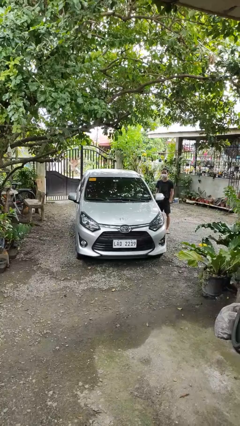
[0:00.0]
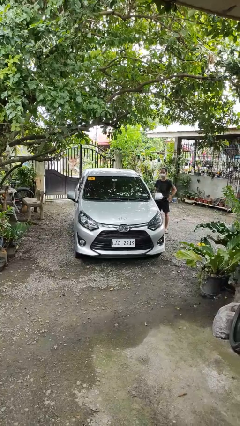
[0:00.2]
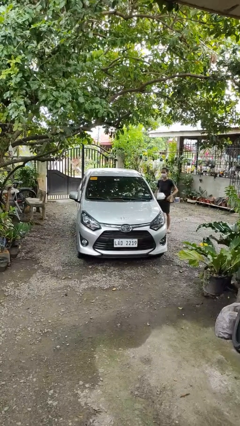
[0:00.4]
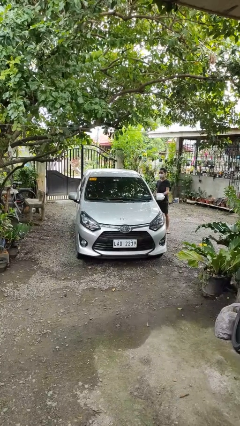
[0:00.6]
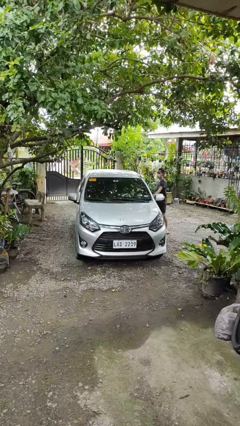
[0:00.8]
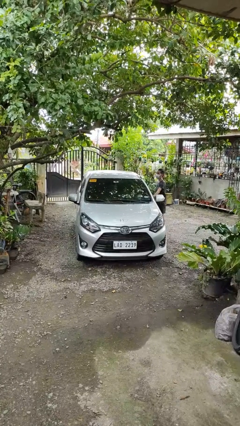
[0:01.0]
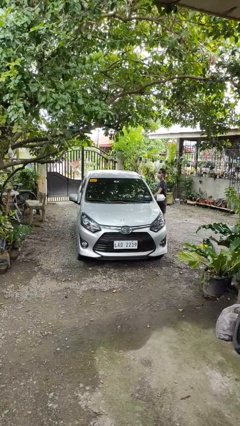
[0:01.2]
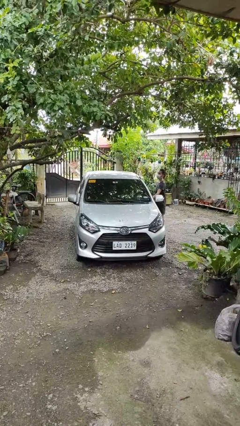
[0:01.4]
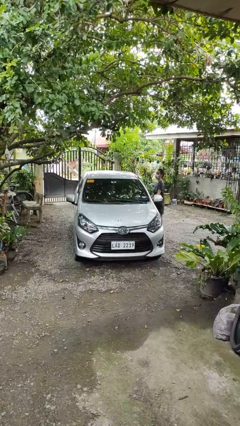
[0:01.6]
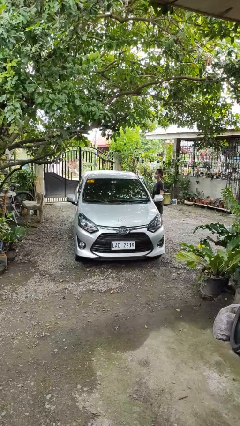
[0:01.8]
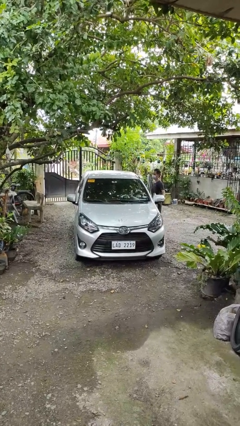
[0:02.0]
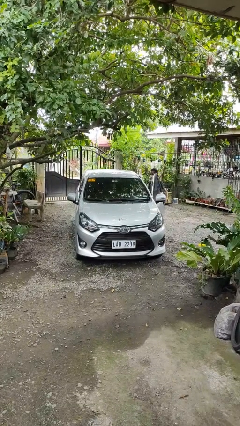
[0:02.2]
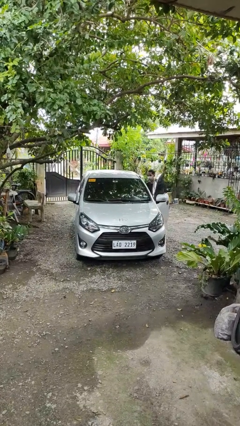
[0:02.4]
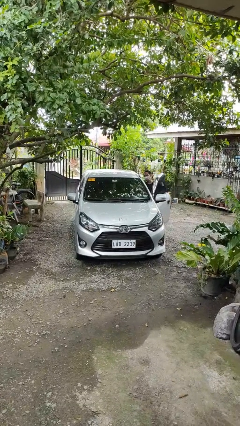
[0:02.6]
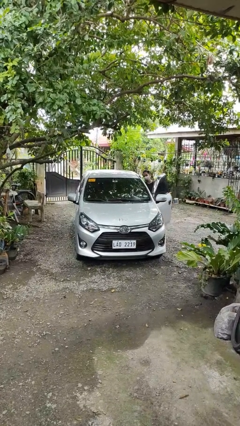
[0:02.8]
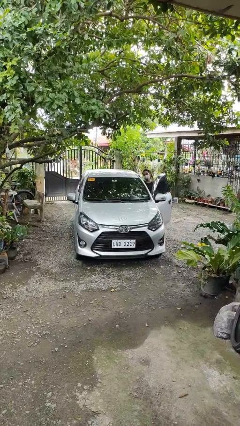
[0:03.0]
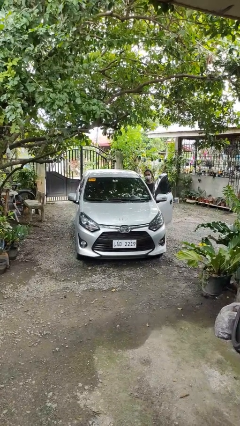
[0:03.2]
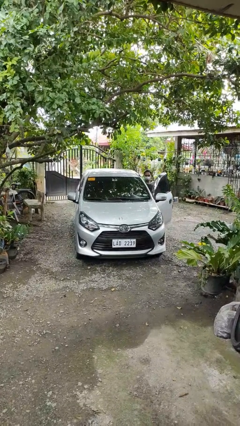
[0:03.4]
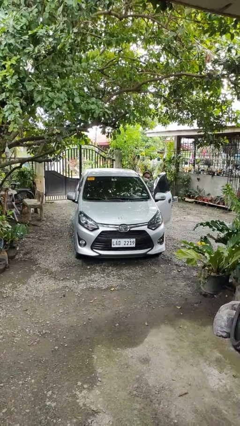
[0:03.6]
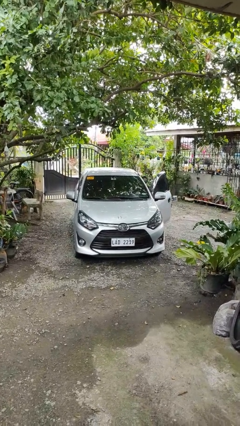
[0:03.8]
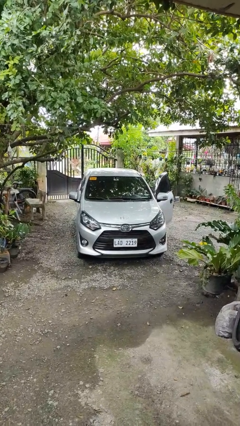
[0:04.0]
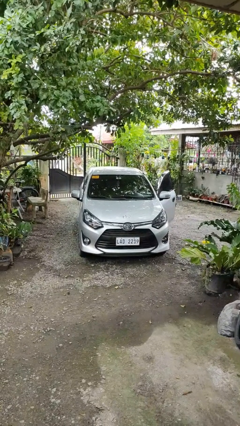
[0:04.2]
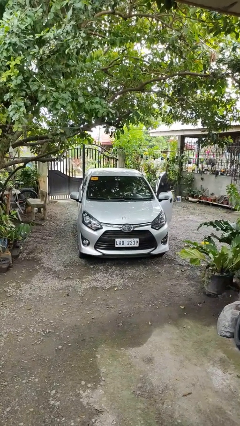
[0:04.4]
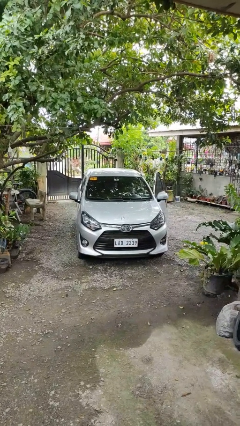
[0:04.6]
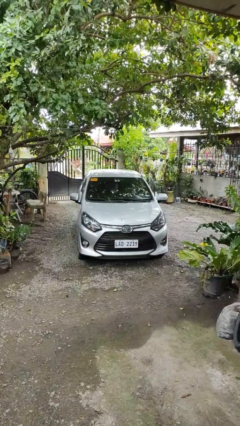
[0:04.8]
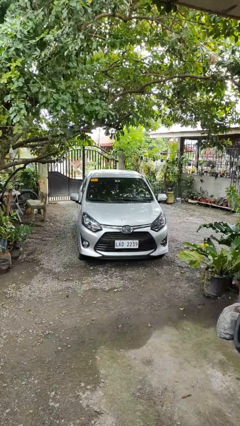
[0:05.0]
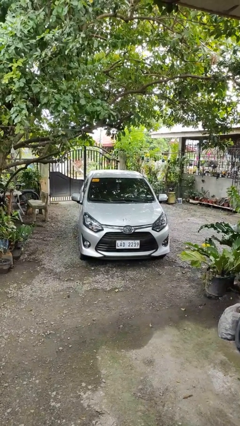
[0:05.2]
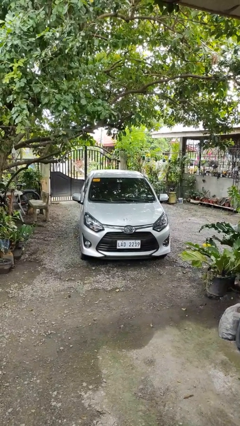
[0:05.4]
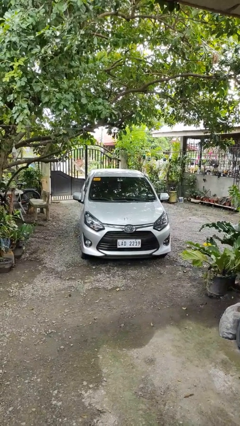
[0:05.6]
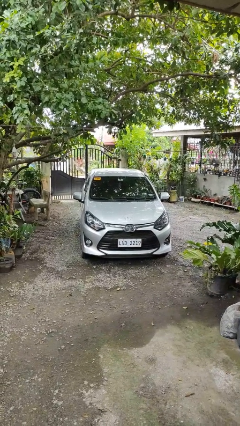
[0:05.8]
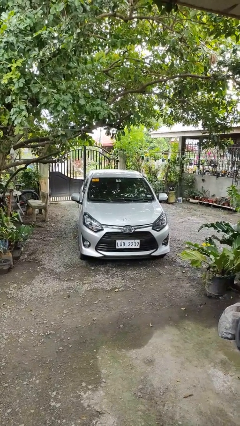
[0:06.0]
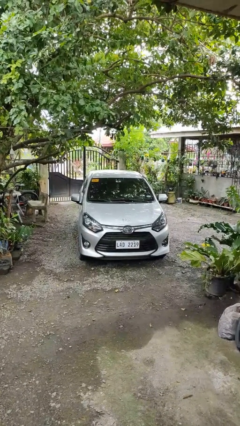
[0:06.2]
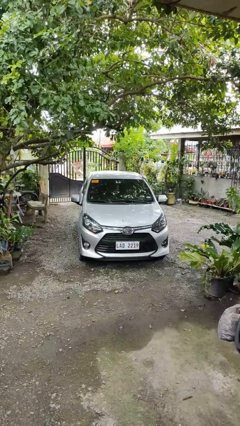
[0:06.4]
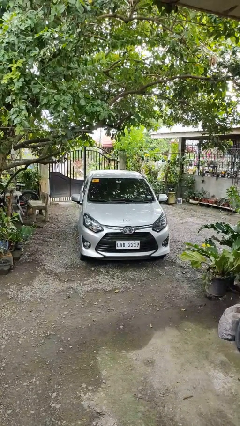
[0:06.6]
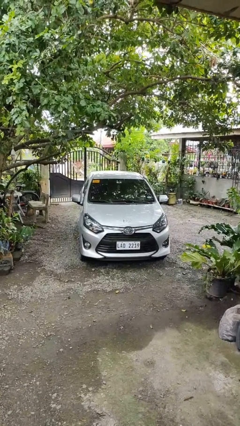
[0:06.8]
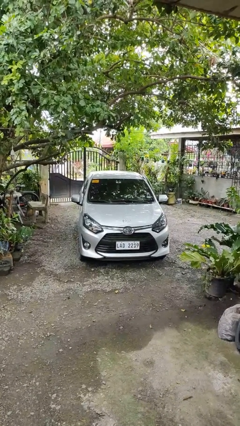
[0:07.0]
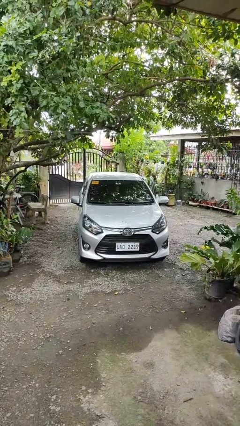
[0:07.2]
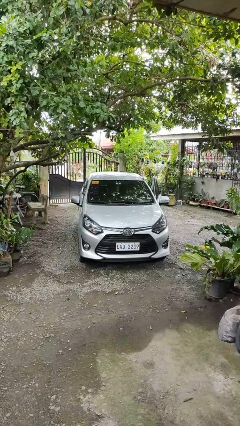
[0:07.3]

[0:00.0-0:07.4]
car picks up person

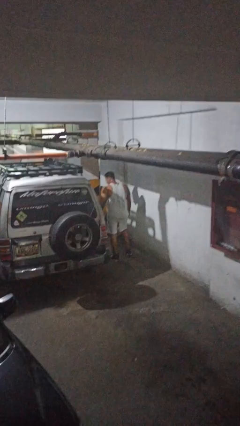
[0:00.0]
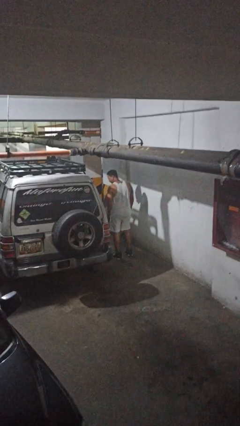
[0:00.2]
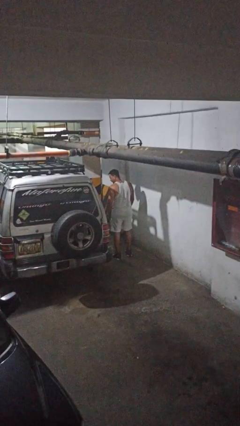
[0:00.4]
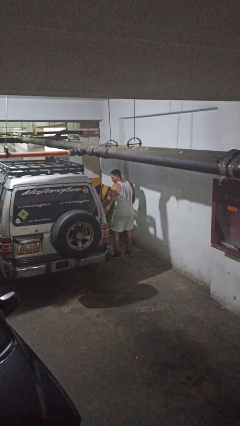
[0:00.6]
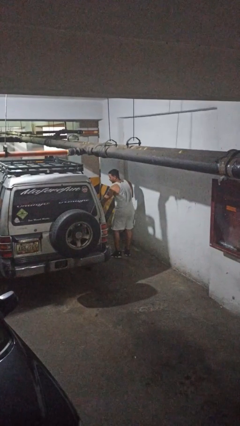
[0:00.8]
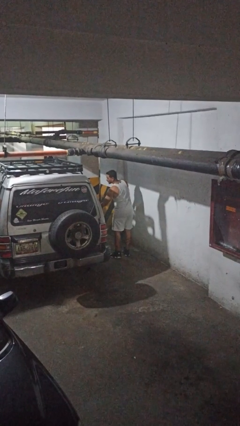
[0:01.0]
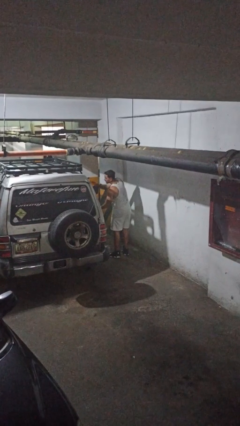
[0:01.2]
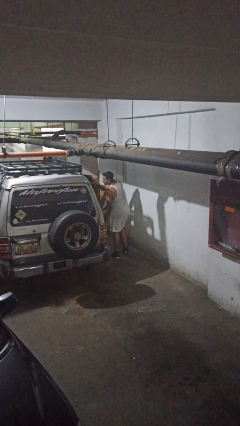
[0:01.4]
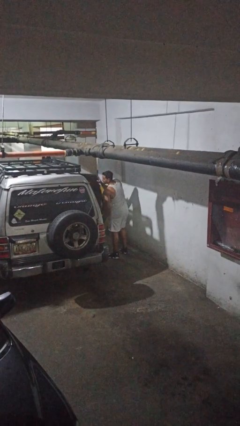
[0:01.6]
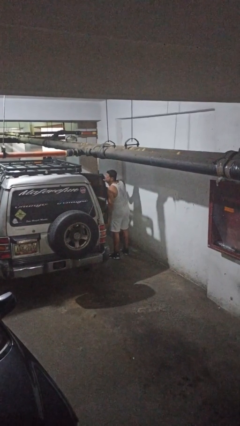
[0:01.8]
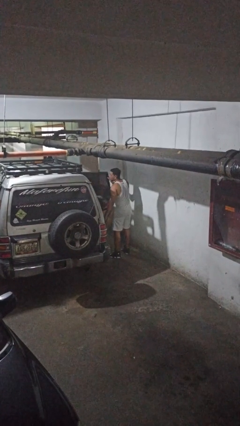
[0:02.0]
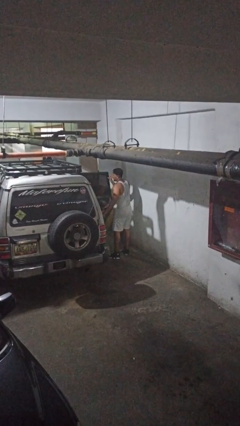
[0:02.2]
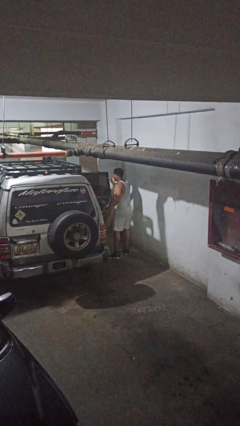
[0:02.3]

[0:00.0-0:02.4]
person opens car door

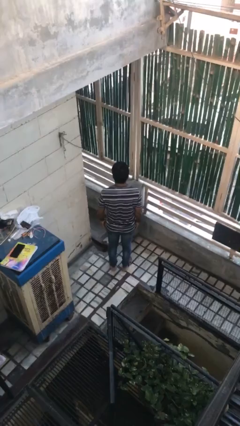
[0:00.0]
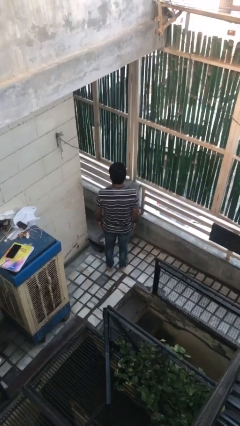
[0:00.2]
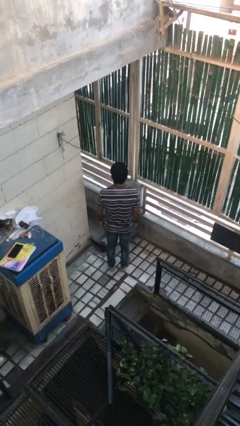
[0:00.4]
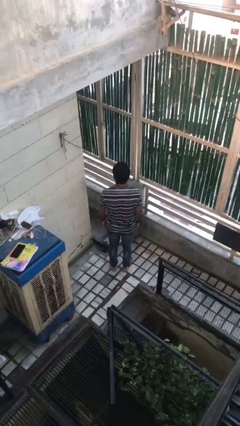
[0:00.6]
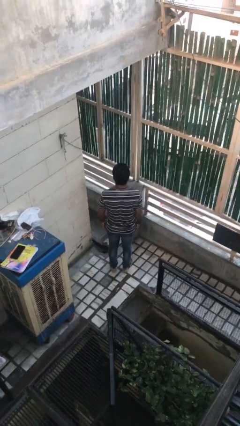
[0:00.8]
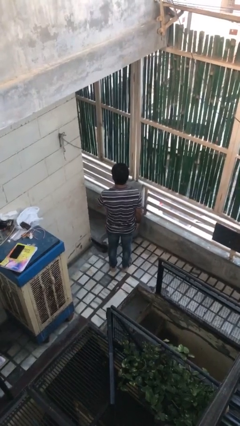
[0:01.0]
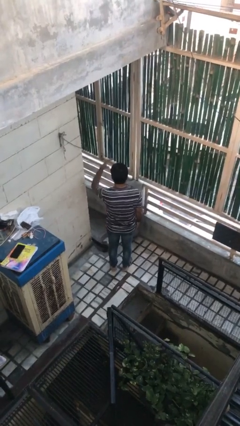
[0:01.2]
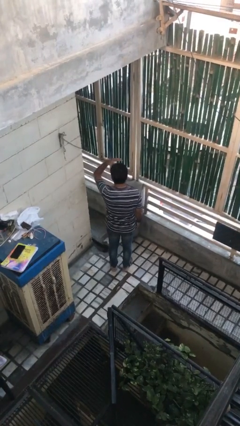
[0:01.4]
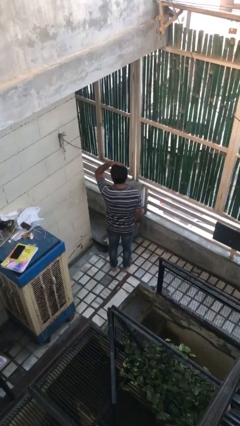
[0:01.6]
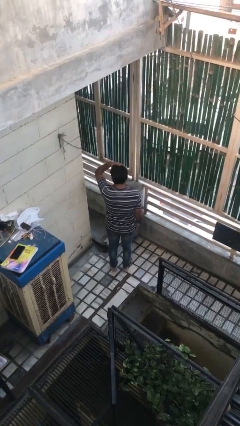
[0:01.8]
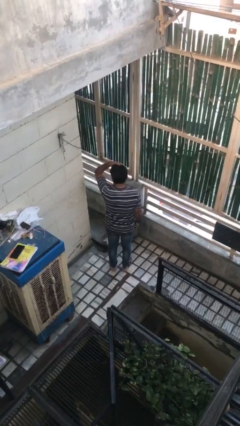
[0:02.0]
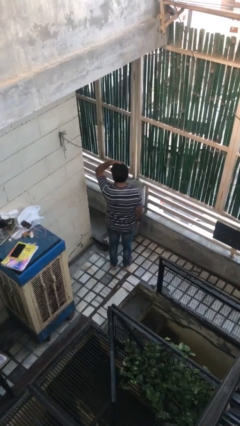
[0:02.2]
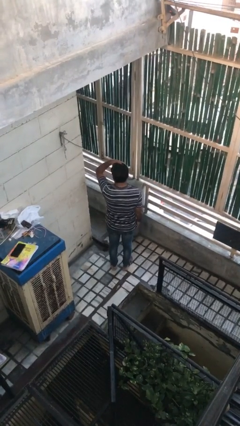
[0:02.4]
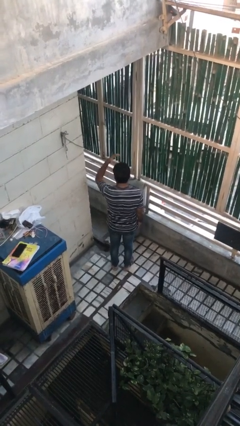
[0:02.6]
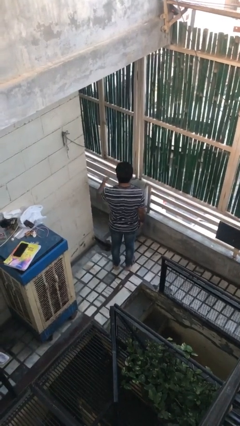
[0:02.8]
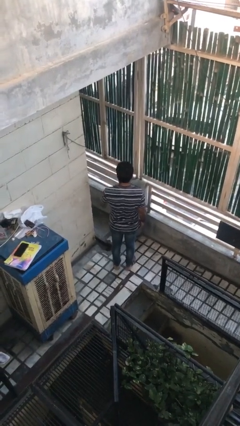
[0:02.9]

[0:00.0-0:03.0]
person pats head

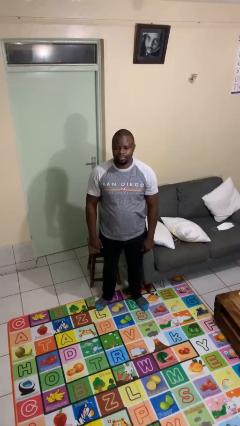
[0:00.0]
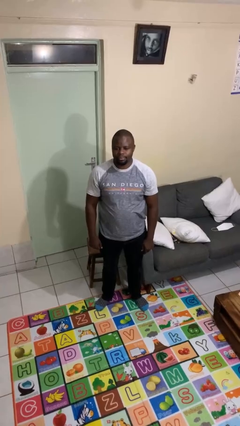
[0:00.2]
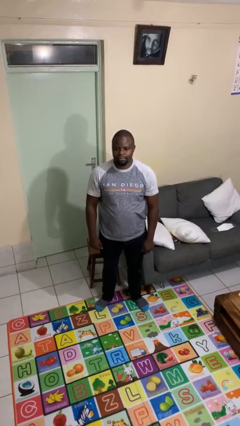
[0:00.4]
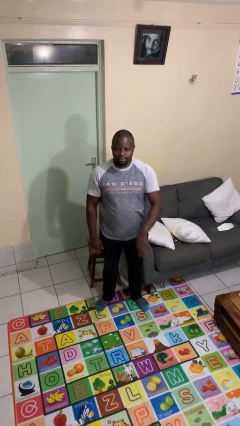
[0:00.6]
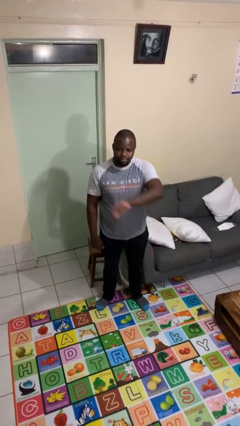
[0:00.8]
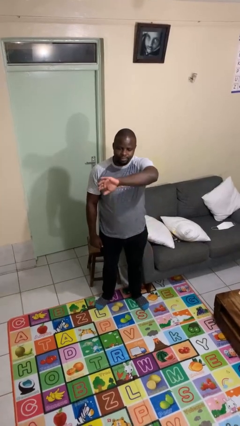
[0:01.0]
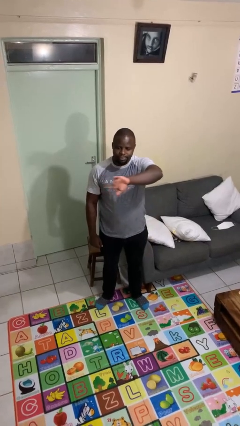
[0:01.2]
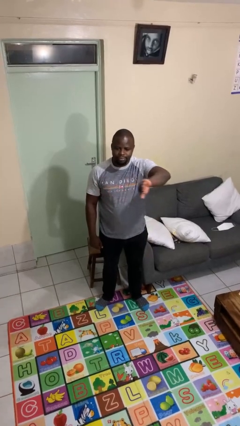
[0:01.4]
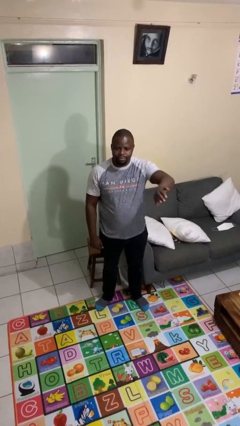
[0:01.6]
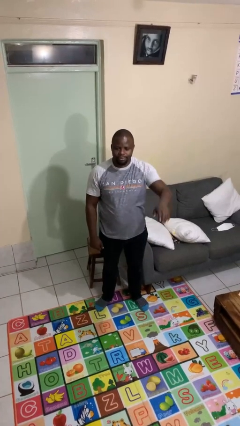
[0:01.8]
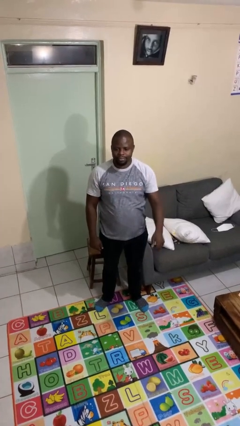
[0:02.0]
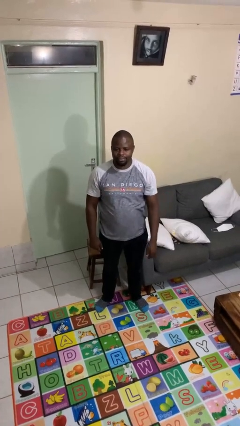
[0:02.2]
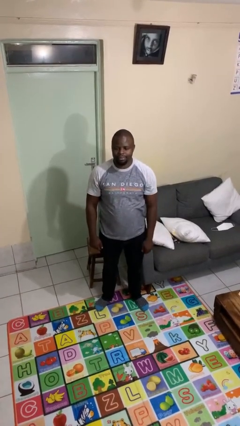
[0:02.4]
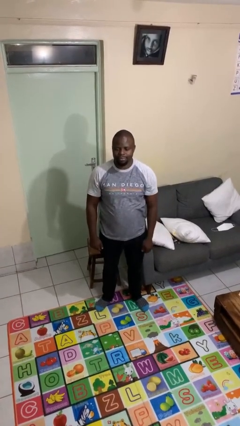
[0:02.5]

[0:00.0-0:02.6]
person gestures swipe left

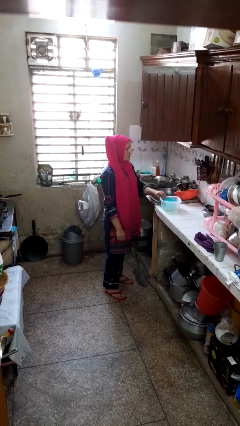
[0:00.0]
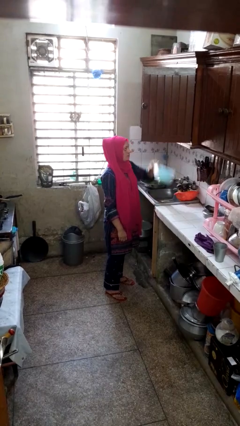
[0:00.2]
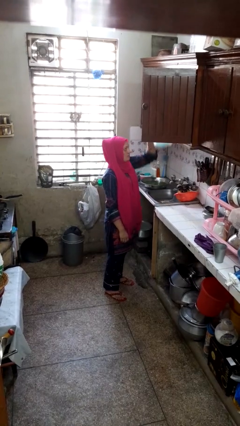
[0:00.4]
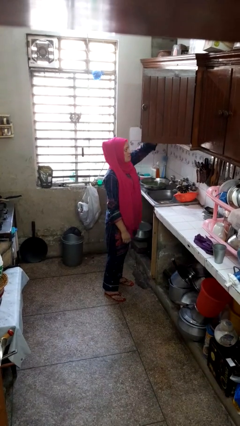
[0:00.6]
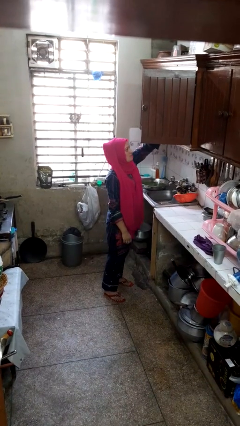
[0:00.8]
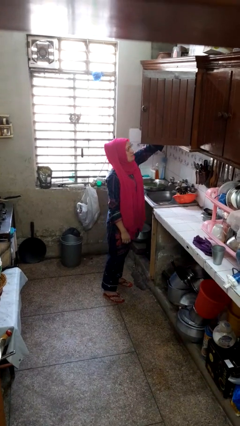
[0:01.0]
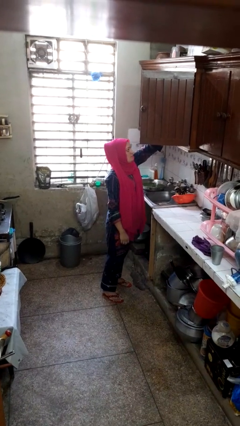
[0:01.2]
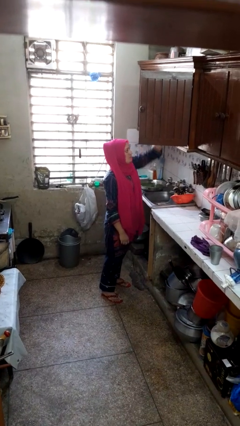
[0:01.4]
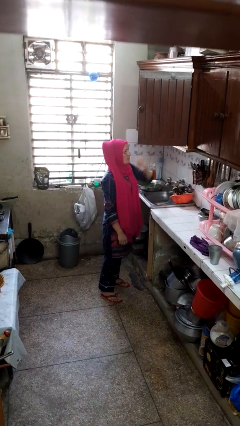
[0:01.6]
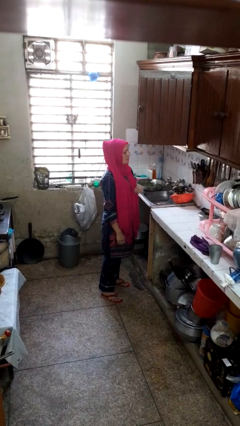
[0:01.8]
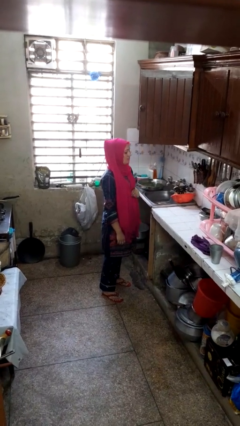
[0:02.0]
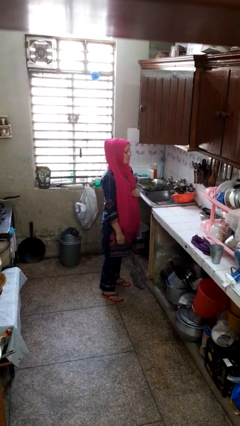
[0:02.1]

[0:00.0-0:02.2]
person puts object in cabinet
